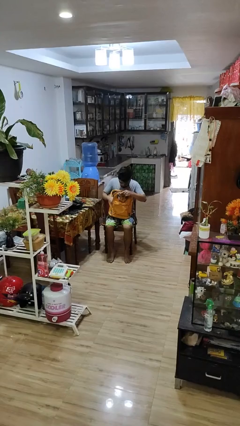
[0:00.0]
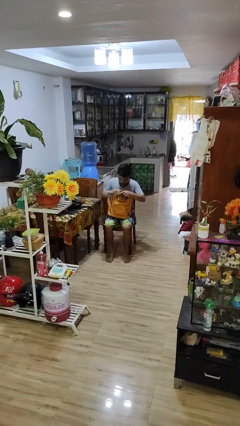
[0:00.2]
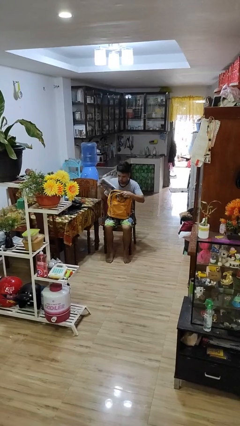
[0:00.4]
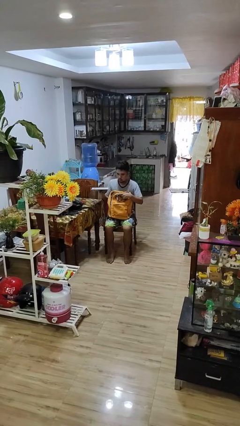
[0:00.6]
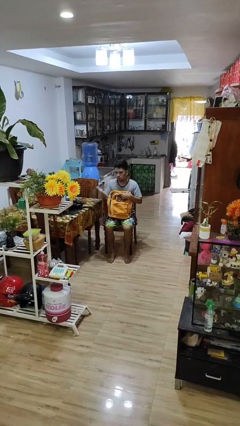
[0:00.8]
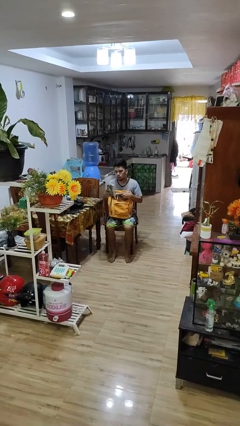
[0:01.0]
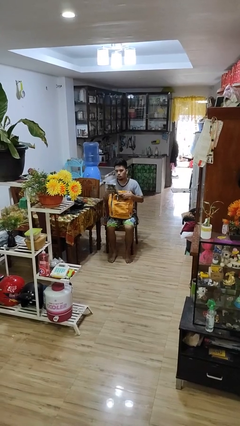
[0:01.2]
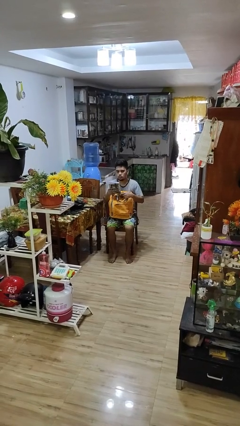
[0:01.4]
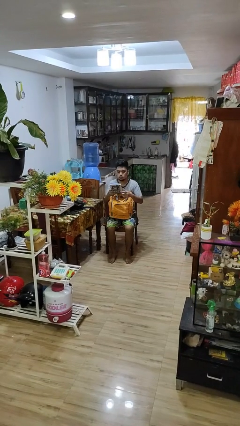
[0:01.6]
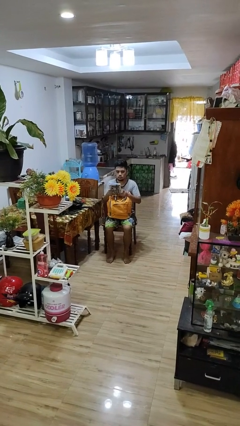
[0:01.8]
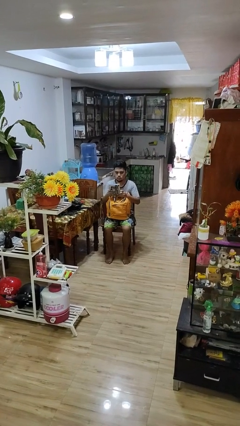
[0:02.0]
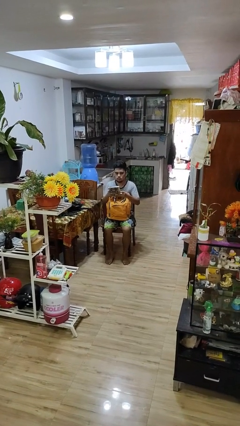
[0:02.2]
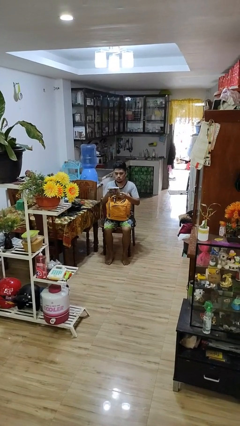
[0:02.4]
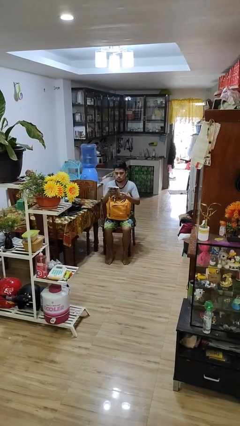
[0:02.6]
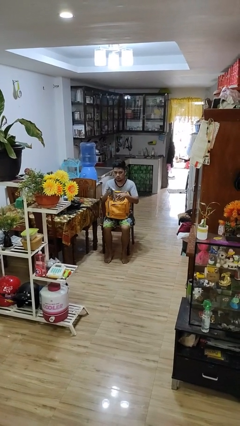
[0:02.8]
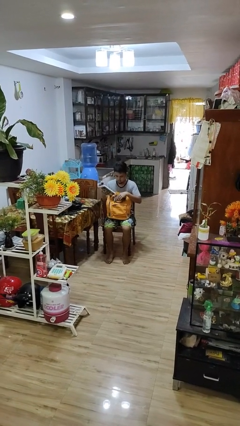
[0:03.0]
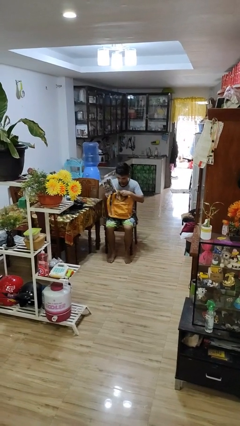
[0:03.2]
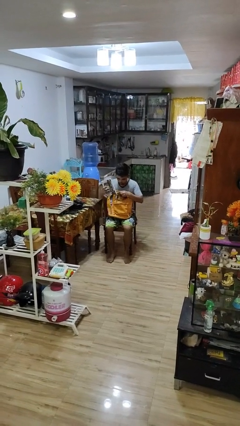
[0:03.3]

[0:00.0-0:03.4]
person takes object from backpack

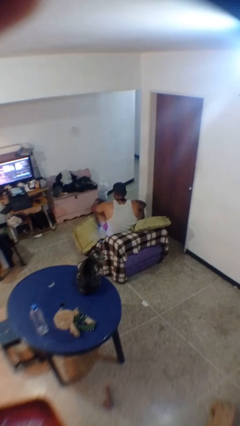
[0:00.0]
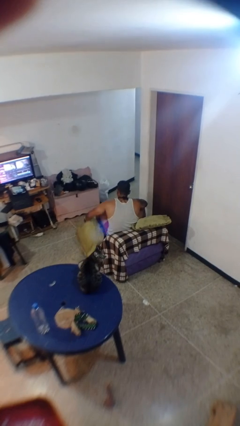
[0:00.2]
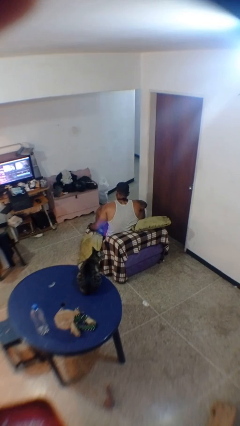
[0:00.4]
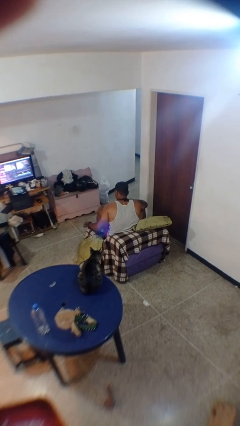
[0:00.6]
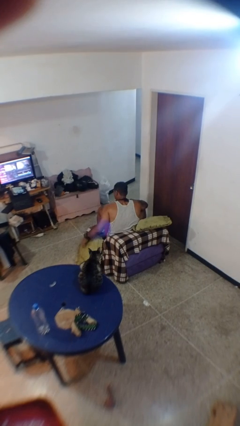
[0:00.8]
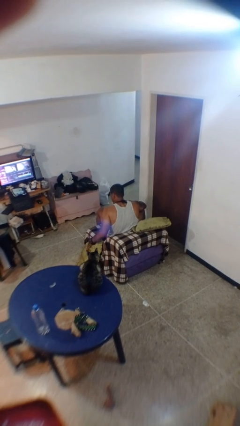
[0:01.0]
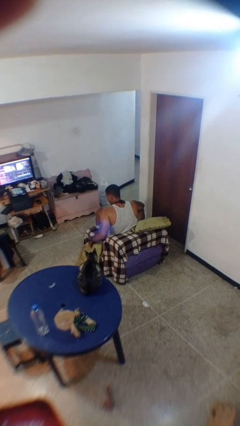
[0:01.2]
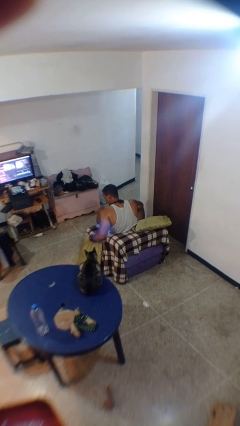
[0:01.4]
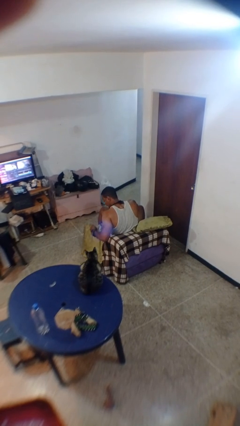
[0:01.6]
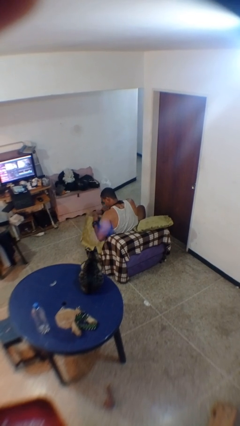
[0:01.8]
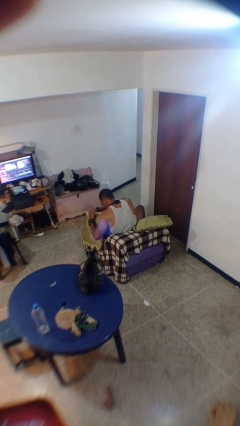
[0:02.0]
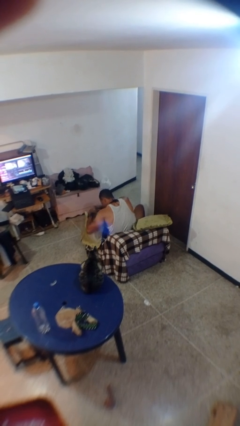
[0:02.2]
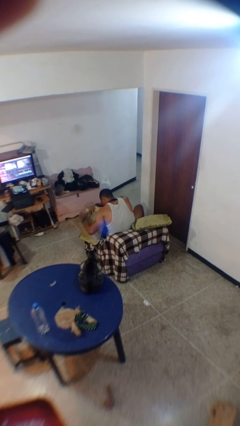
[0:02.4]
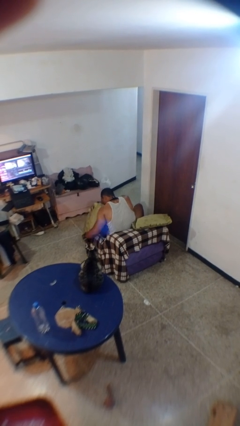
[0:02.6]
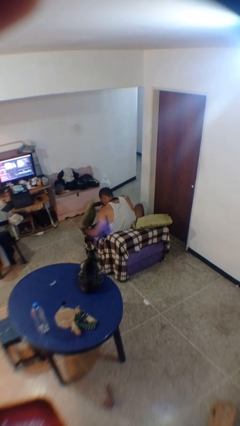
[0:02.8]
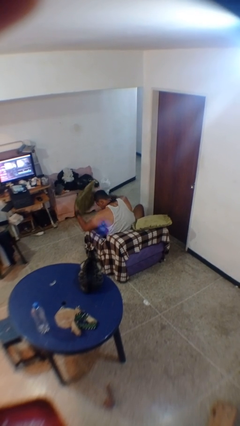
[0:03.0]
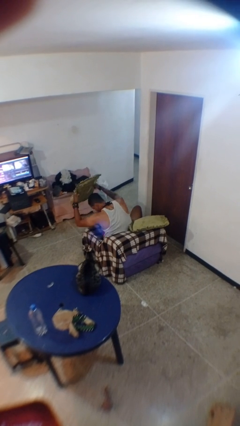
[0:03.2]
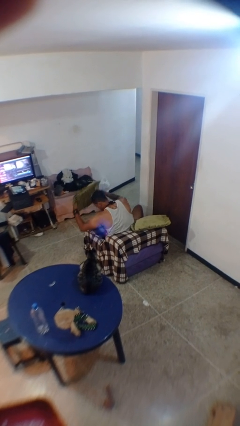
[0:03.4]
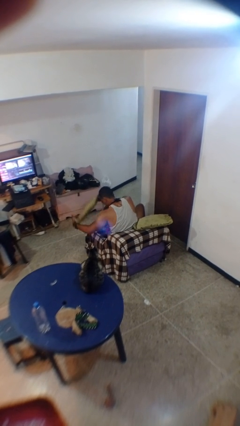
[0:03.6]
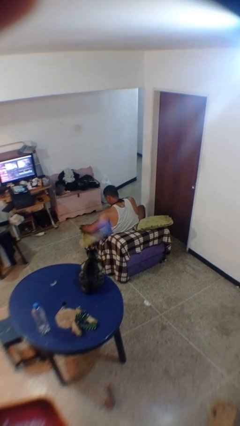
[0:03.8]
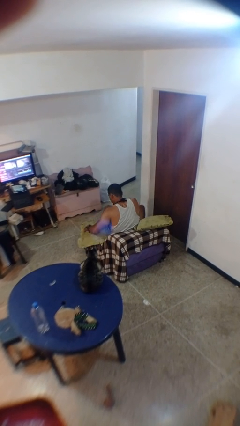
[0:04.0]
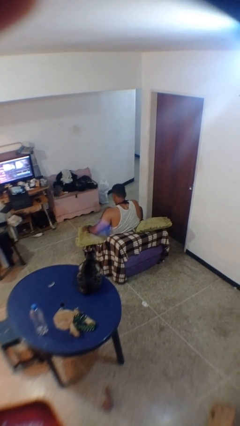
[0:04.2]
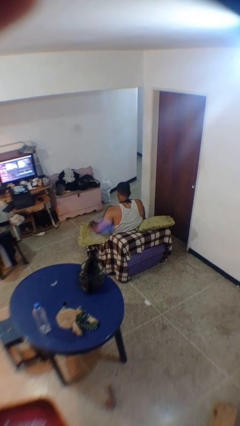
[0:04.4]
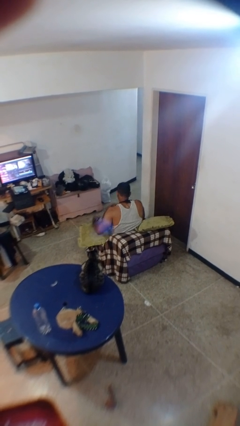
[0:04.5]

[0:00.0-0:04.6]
person searches in couch

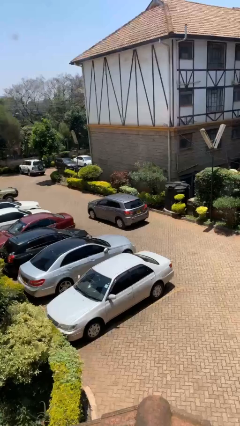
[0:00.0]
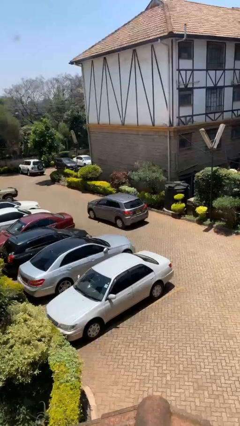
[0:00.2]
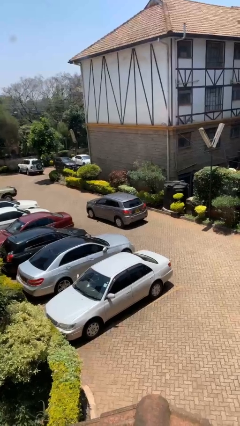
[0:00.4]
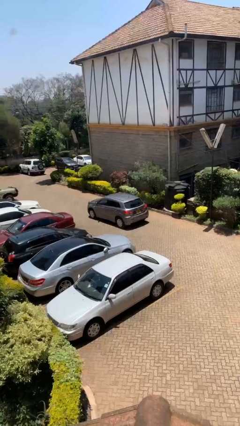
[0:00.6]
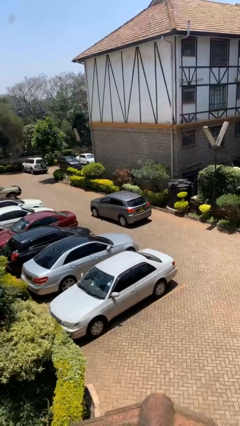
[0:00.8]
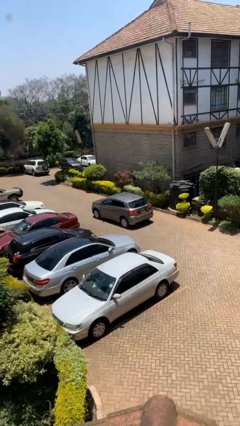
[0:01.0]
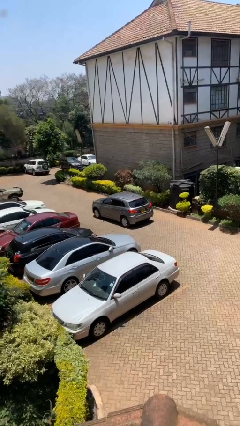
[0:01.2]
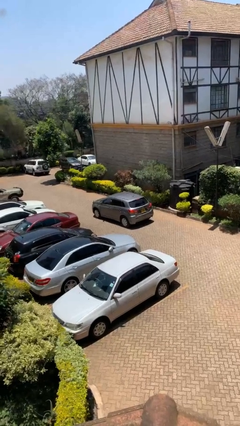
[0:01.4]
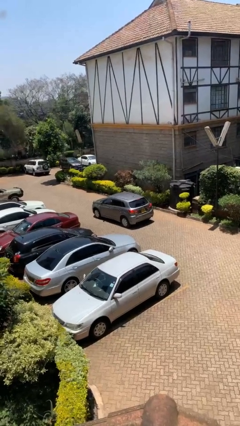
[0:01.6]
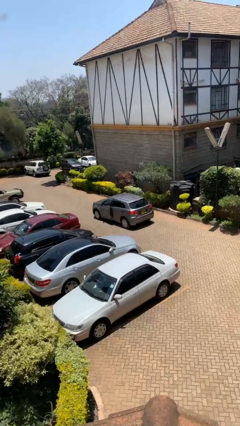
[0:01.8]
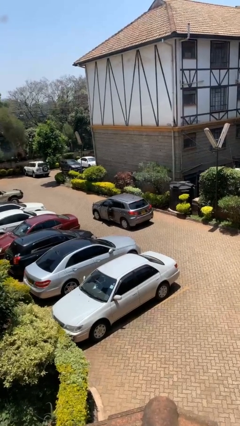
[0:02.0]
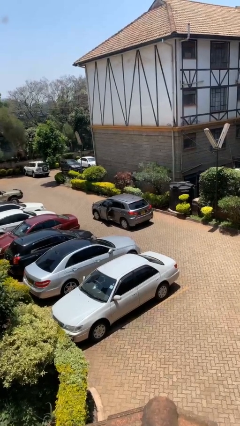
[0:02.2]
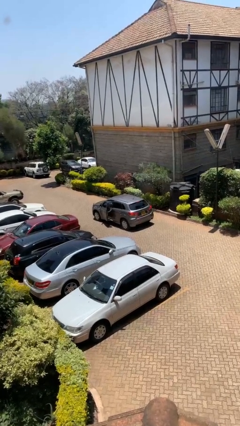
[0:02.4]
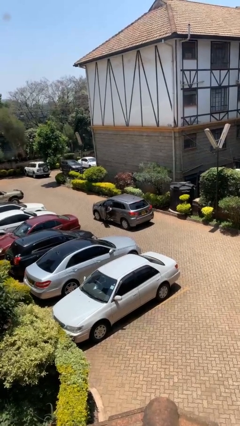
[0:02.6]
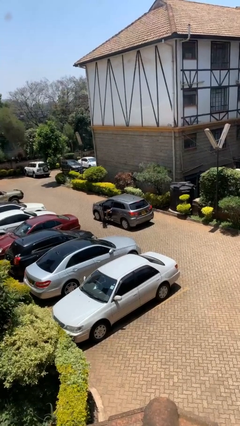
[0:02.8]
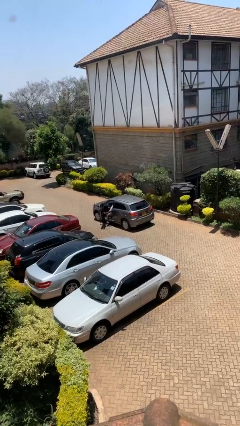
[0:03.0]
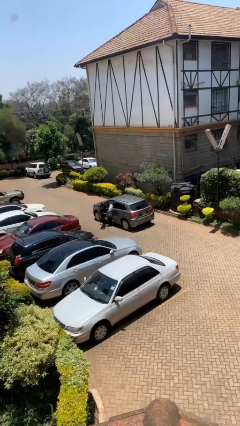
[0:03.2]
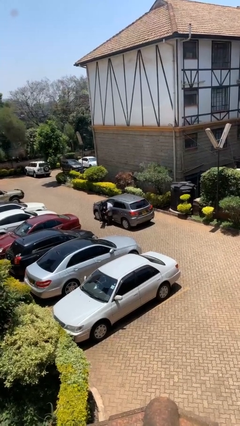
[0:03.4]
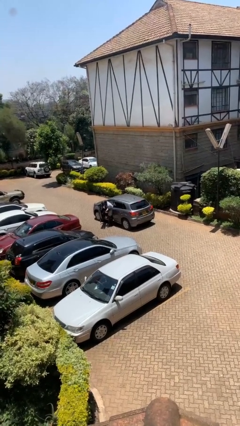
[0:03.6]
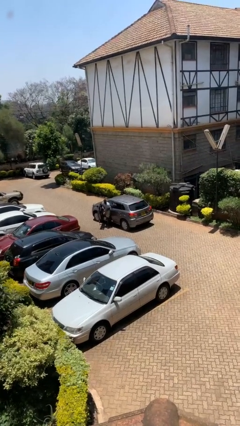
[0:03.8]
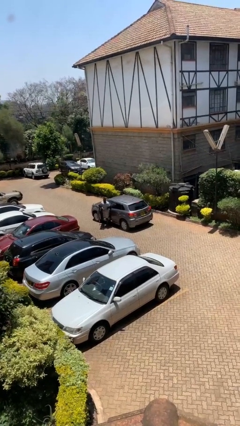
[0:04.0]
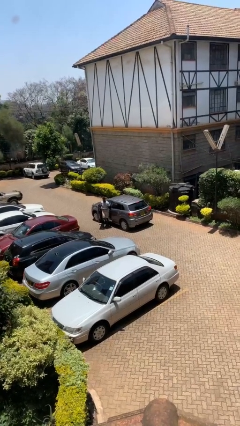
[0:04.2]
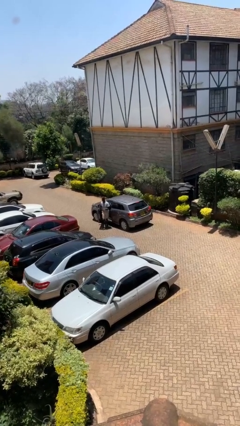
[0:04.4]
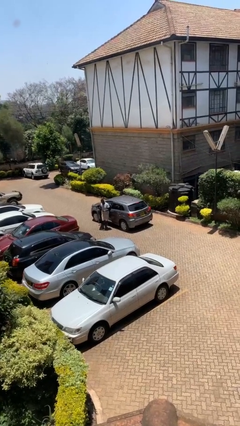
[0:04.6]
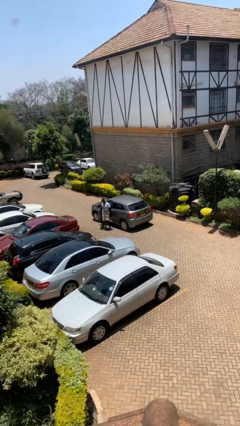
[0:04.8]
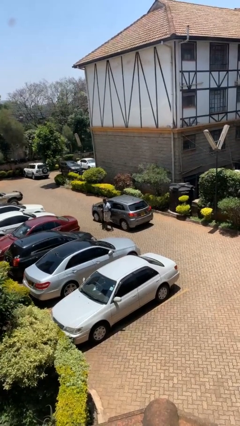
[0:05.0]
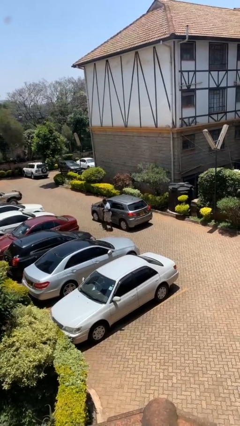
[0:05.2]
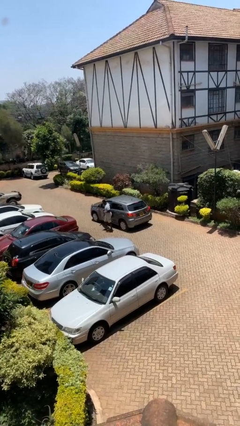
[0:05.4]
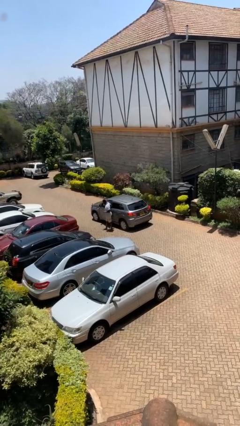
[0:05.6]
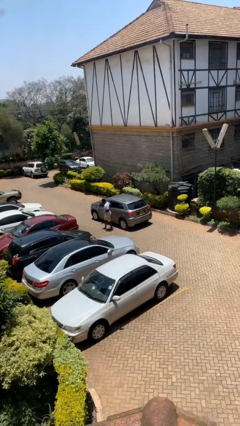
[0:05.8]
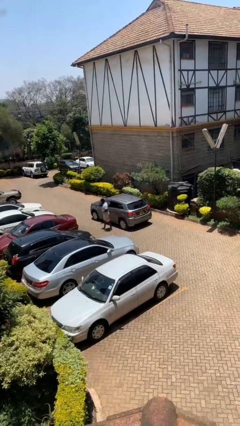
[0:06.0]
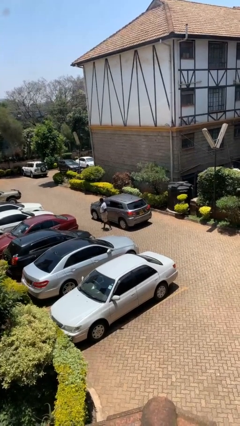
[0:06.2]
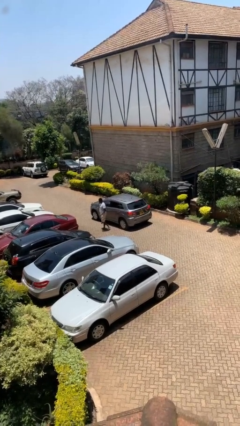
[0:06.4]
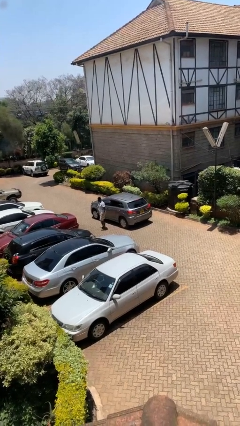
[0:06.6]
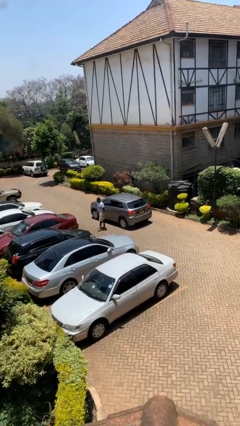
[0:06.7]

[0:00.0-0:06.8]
car drops off person

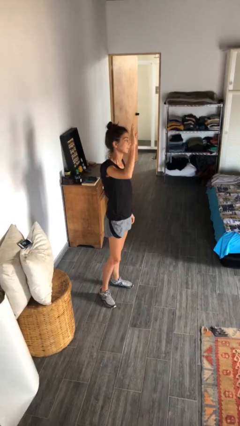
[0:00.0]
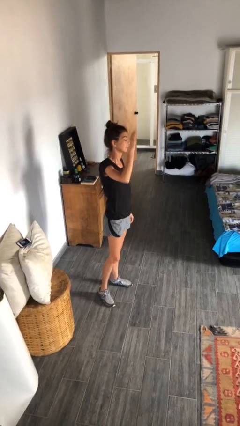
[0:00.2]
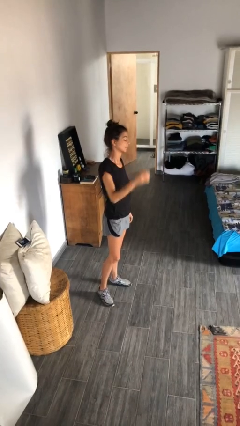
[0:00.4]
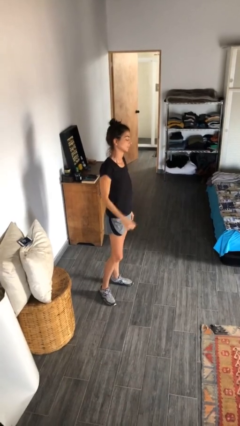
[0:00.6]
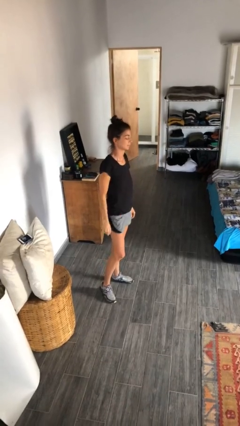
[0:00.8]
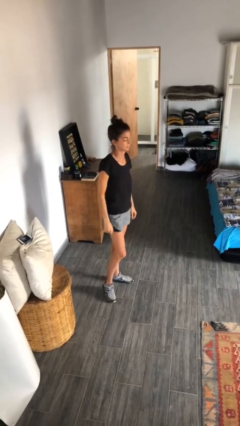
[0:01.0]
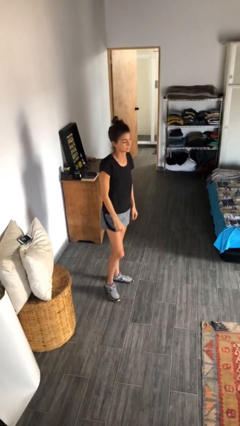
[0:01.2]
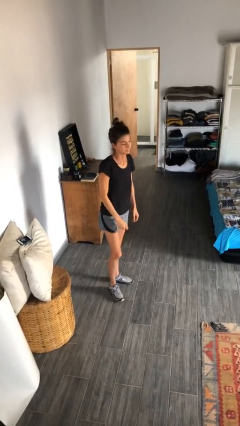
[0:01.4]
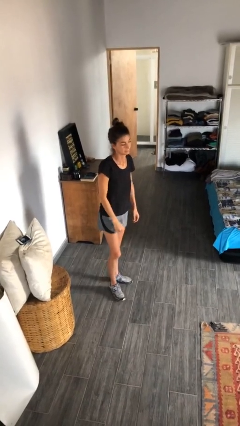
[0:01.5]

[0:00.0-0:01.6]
person gestures lower hand

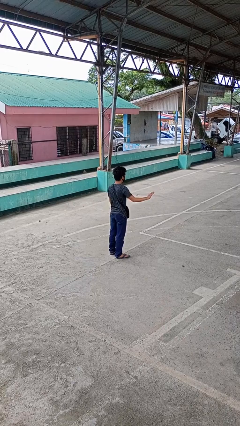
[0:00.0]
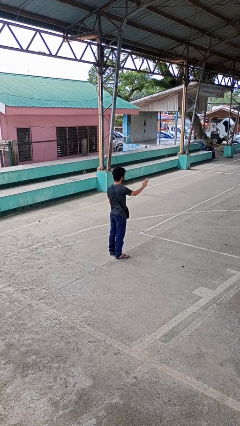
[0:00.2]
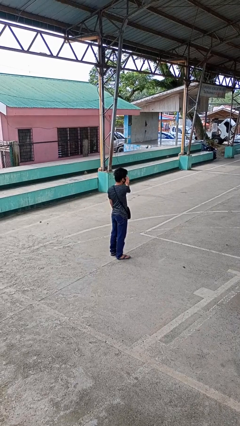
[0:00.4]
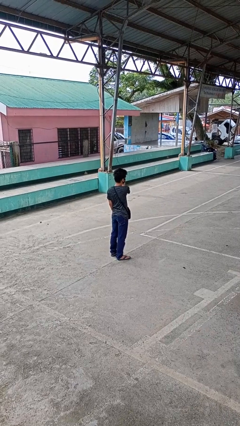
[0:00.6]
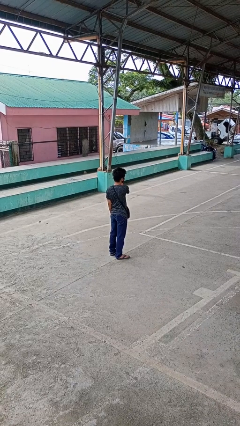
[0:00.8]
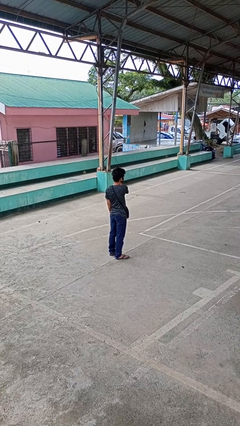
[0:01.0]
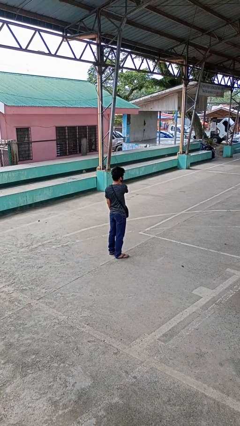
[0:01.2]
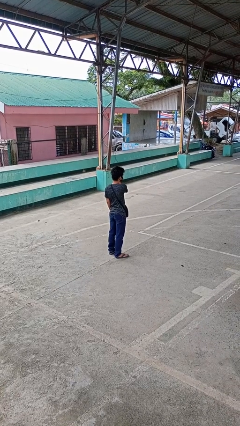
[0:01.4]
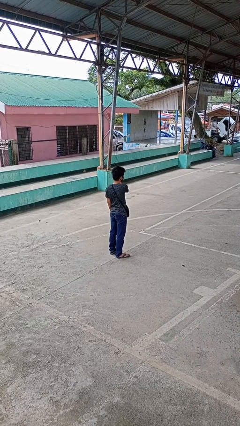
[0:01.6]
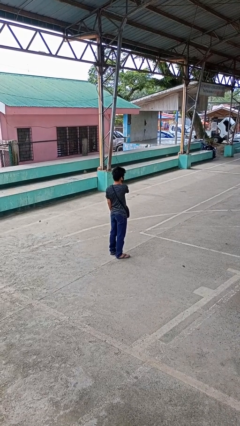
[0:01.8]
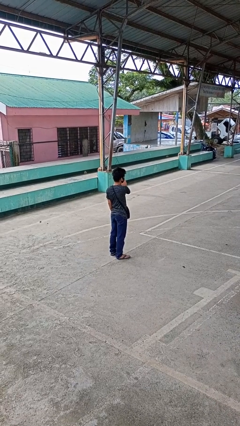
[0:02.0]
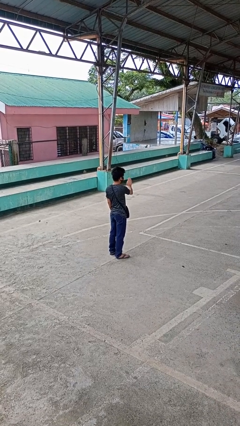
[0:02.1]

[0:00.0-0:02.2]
person gestures swipe left
